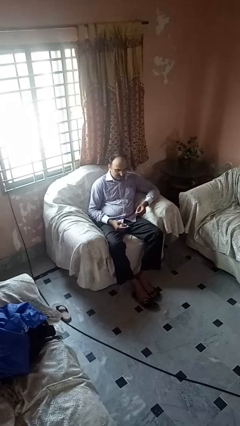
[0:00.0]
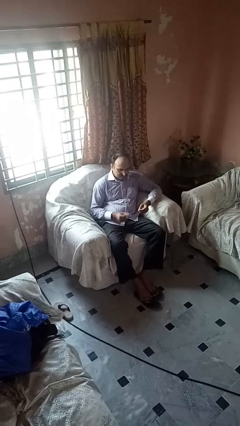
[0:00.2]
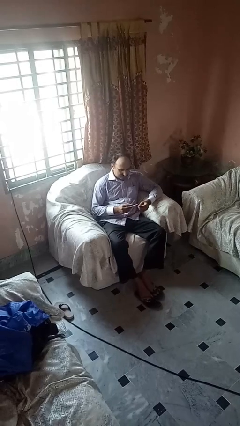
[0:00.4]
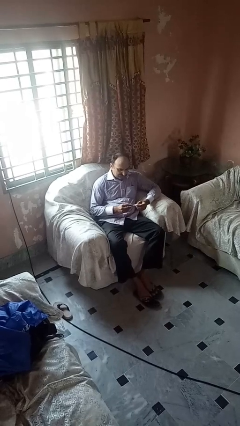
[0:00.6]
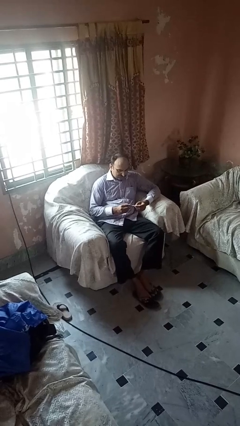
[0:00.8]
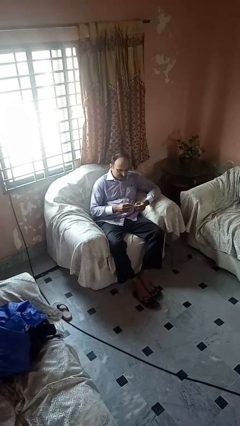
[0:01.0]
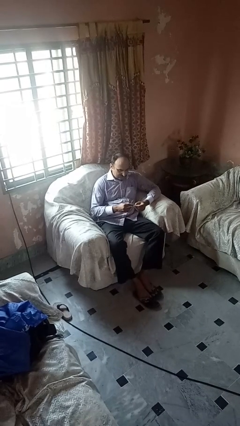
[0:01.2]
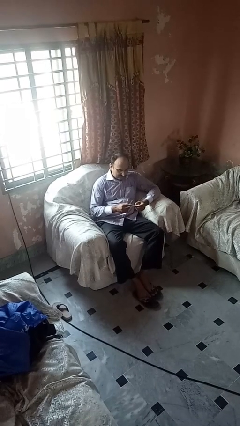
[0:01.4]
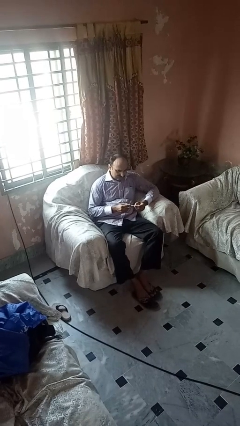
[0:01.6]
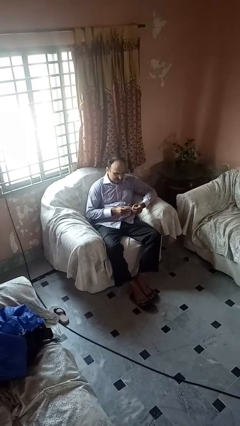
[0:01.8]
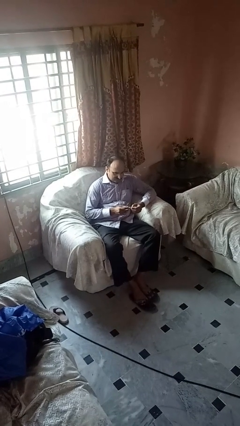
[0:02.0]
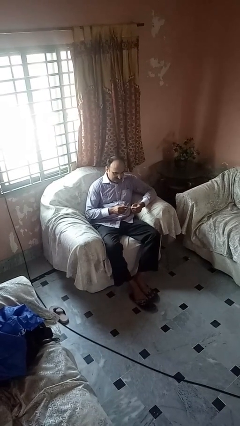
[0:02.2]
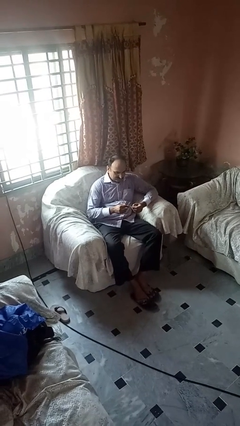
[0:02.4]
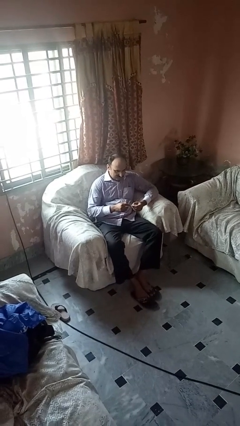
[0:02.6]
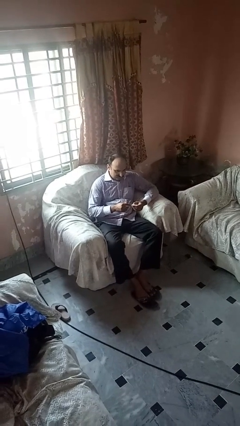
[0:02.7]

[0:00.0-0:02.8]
person files fingernails

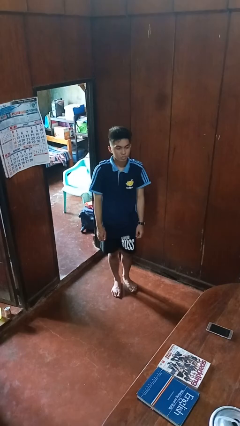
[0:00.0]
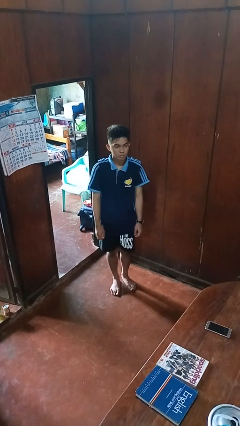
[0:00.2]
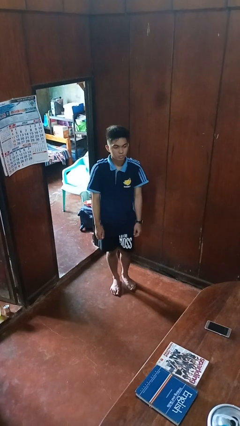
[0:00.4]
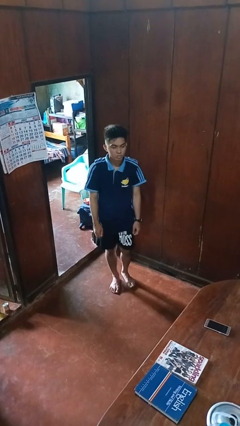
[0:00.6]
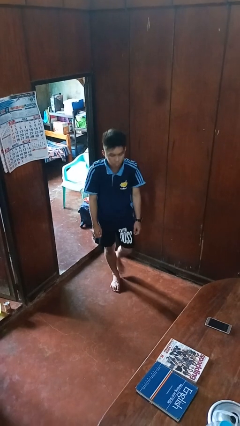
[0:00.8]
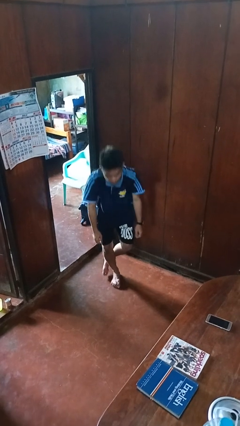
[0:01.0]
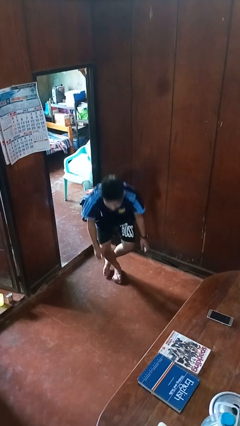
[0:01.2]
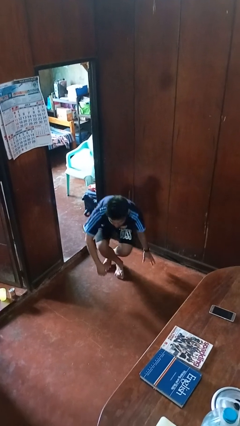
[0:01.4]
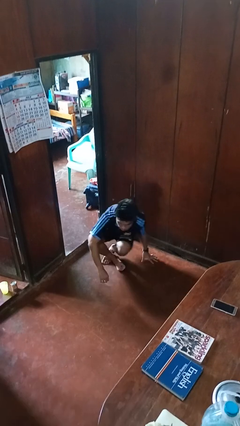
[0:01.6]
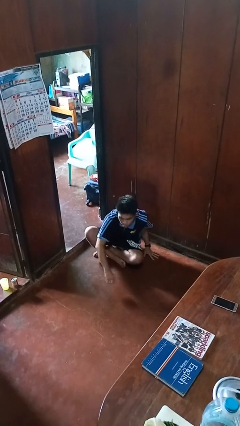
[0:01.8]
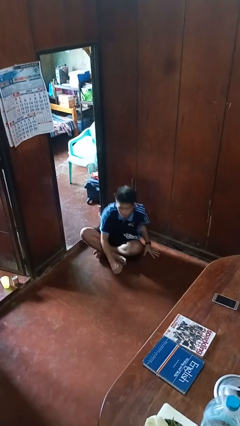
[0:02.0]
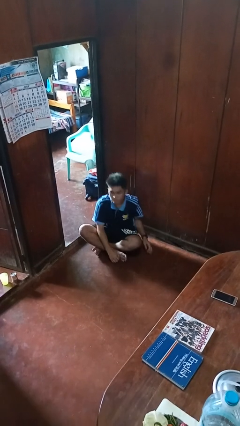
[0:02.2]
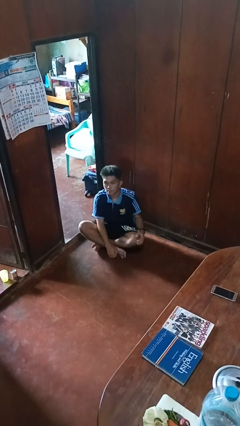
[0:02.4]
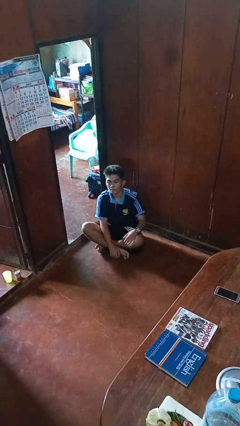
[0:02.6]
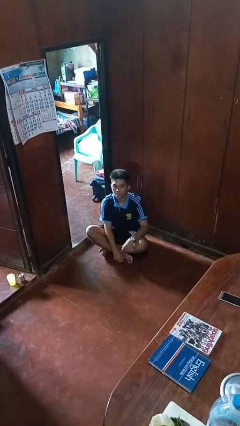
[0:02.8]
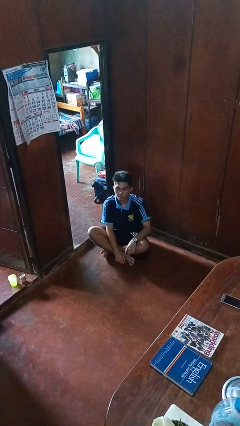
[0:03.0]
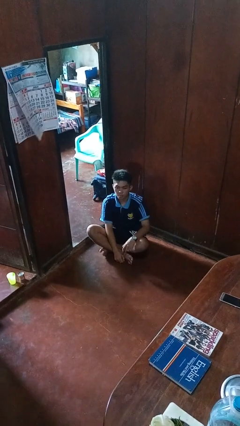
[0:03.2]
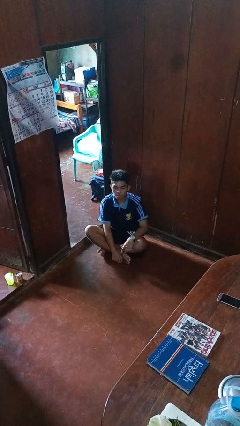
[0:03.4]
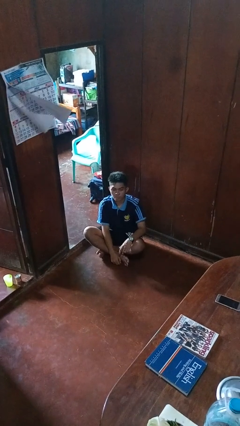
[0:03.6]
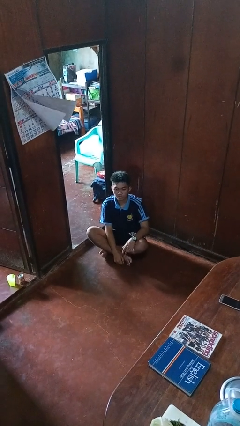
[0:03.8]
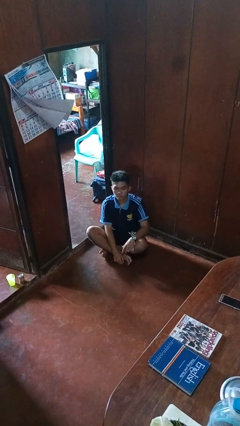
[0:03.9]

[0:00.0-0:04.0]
person sits crisscross

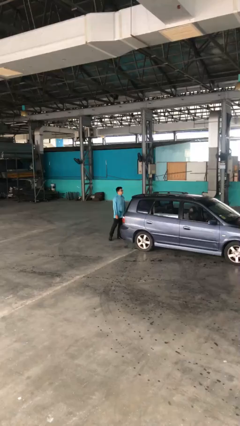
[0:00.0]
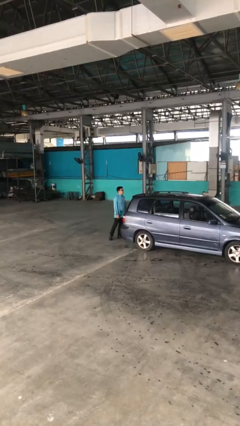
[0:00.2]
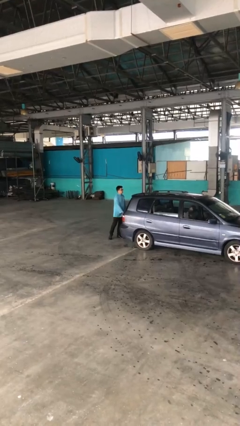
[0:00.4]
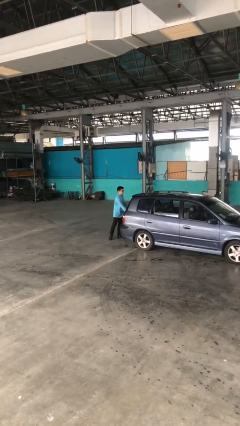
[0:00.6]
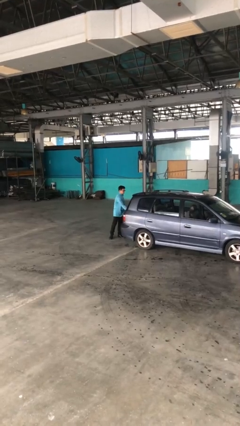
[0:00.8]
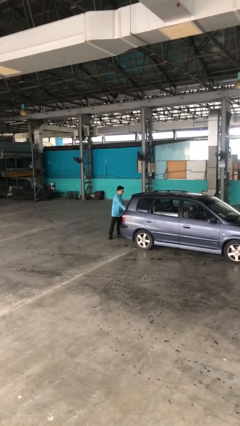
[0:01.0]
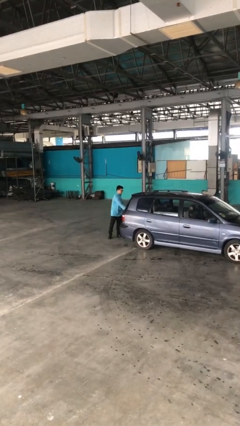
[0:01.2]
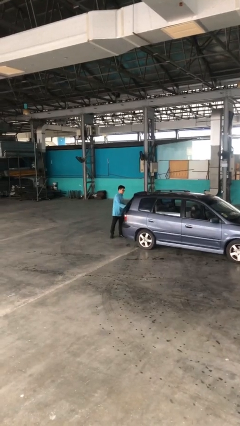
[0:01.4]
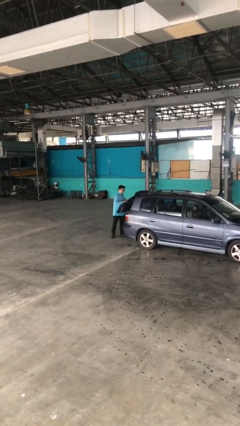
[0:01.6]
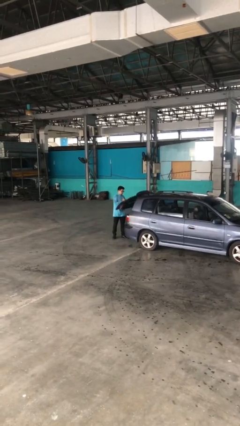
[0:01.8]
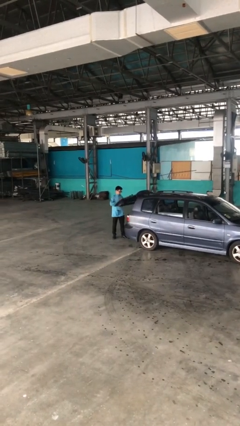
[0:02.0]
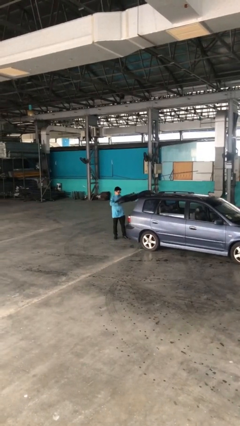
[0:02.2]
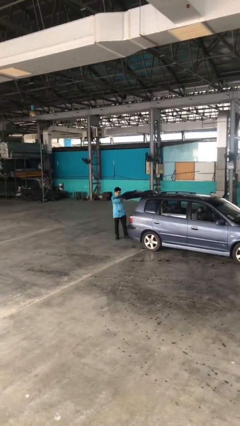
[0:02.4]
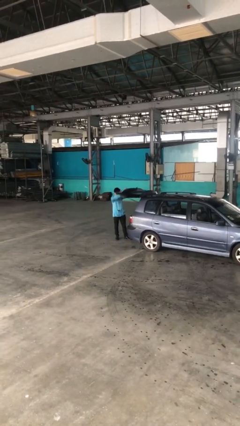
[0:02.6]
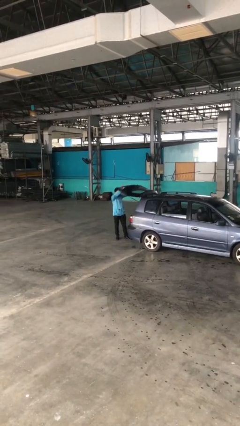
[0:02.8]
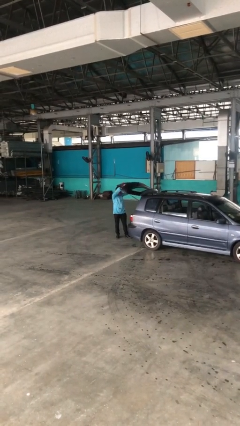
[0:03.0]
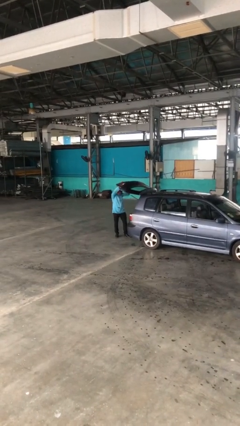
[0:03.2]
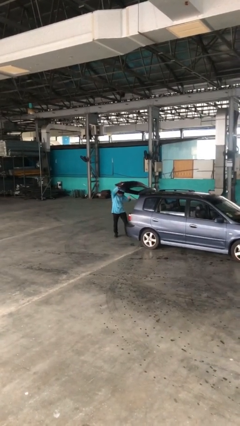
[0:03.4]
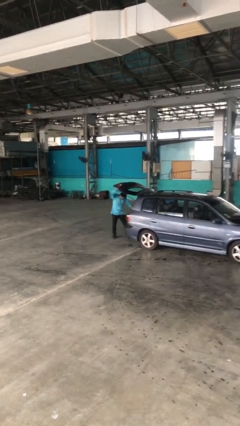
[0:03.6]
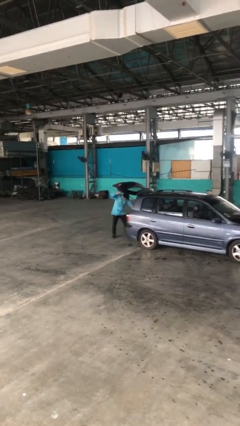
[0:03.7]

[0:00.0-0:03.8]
person opens car trunk

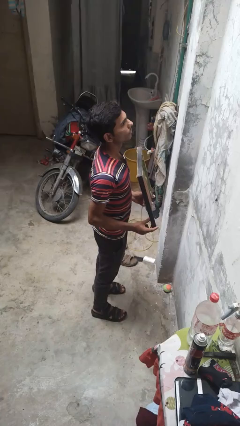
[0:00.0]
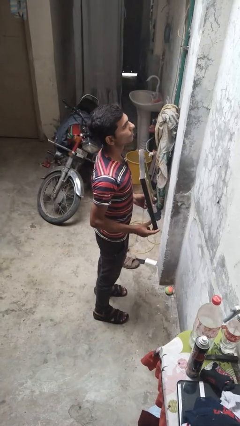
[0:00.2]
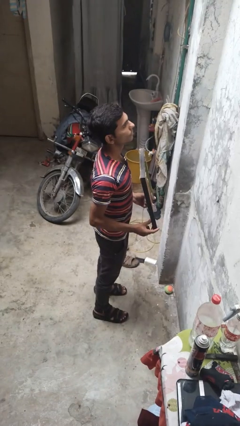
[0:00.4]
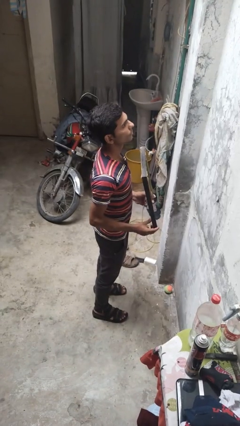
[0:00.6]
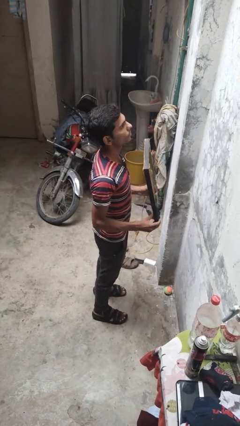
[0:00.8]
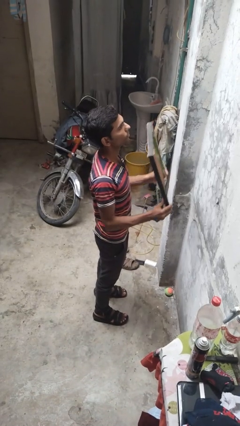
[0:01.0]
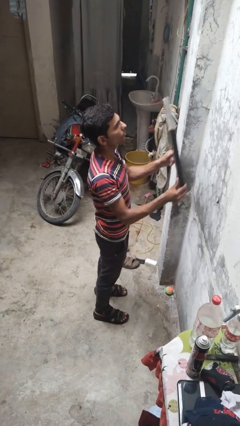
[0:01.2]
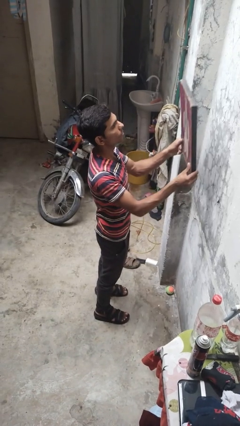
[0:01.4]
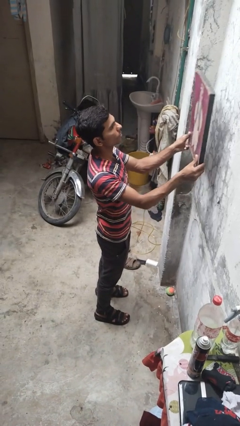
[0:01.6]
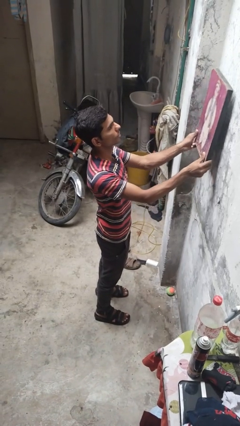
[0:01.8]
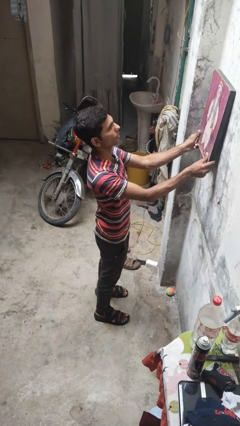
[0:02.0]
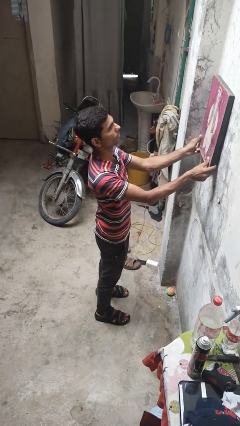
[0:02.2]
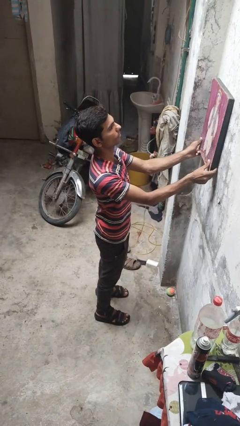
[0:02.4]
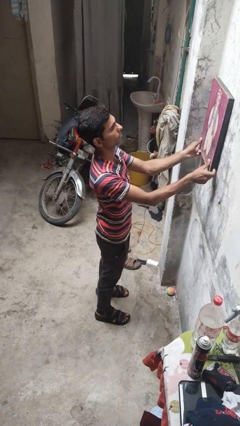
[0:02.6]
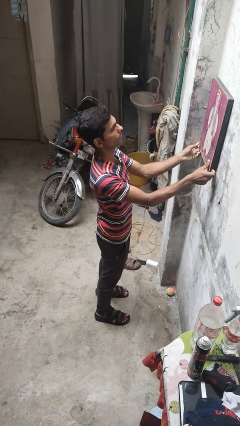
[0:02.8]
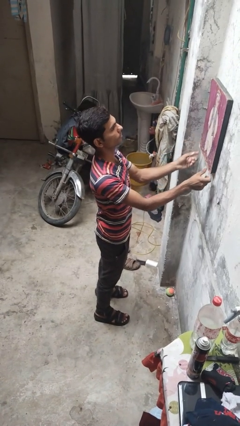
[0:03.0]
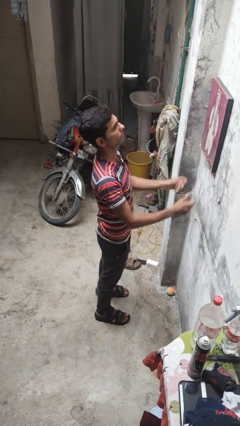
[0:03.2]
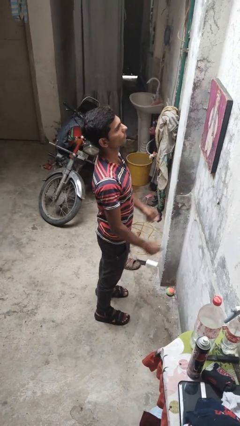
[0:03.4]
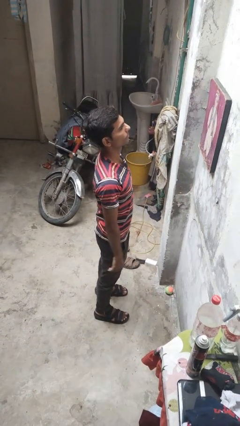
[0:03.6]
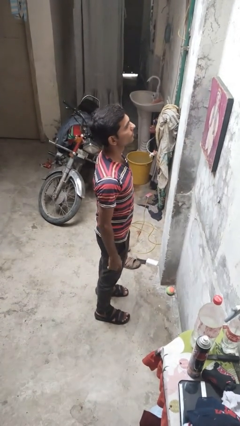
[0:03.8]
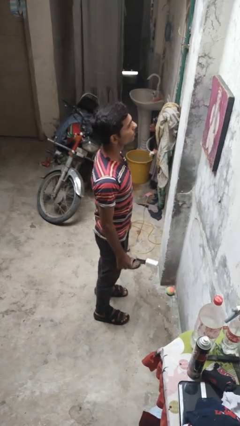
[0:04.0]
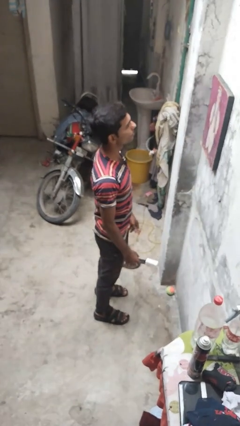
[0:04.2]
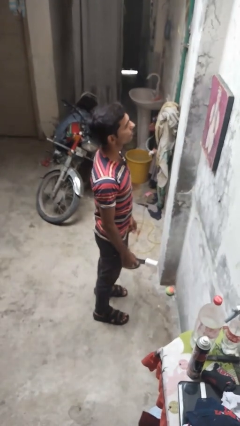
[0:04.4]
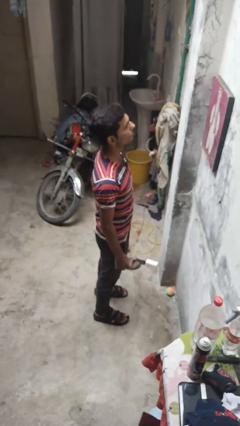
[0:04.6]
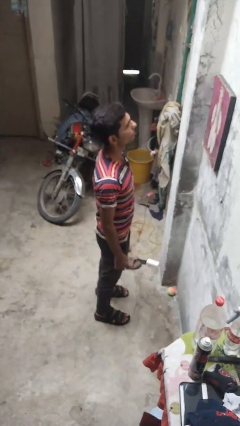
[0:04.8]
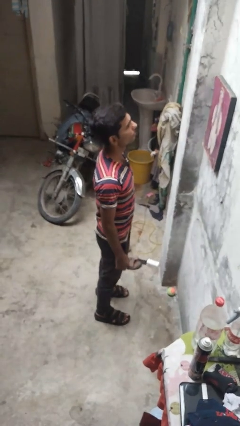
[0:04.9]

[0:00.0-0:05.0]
person puts up picture frame

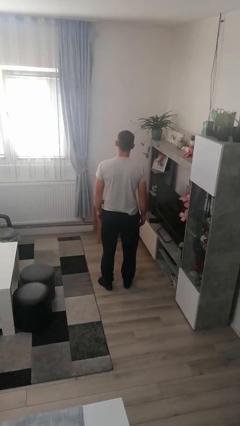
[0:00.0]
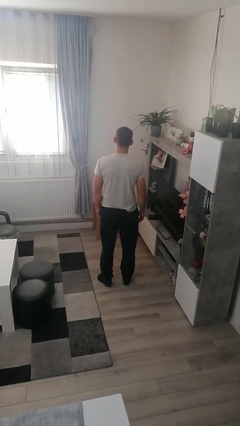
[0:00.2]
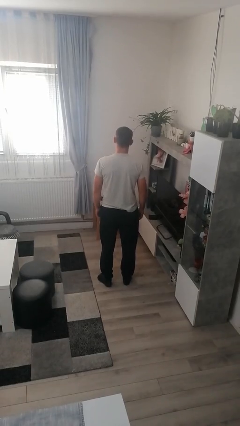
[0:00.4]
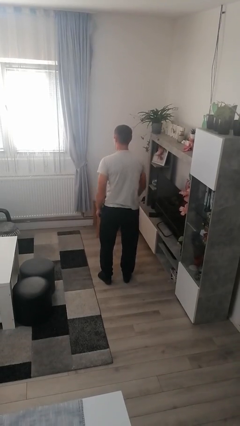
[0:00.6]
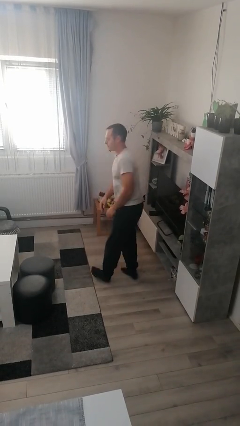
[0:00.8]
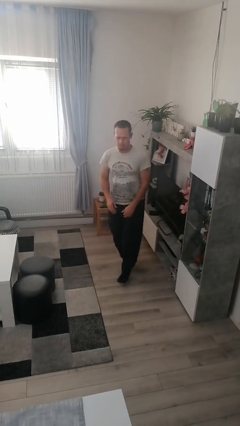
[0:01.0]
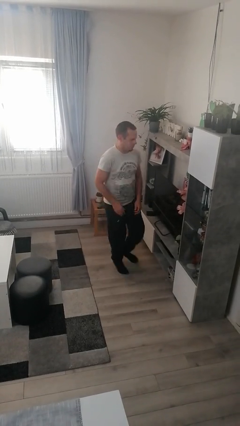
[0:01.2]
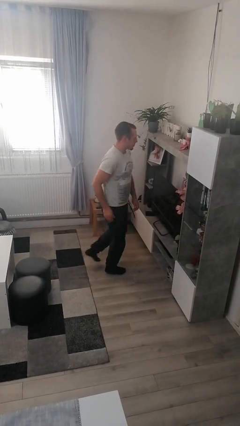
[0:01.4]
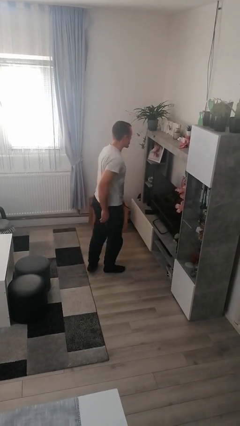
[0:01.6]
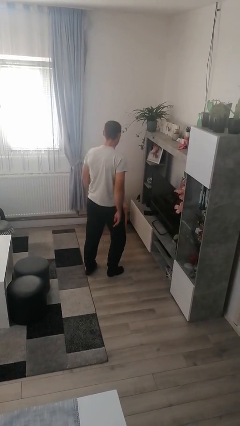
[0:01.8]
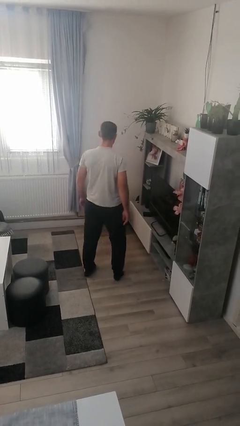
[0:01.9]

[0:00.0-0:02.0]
person twirls

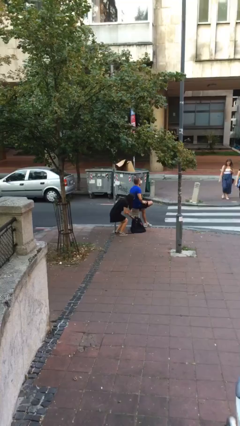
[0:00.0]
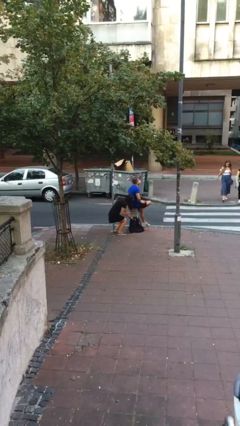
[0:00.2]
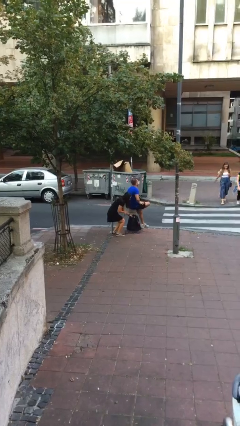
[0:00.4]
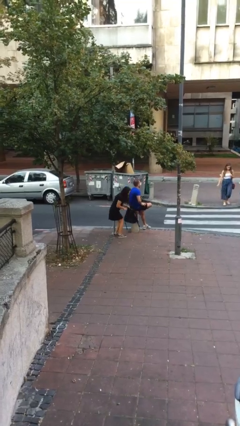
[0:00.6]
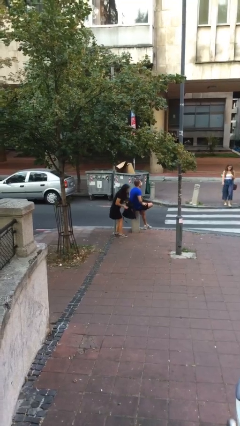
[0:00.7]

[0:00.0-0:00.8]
person steals object from person
